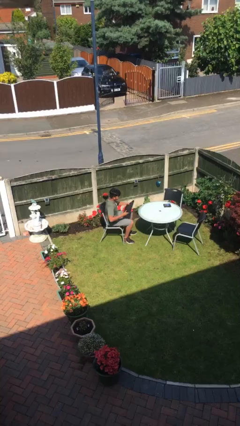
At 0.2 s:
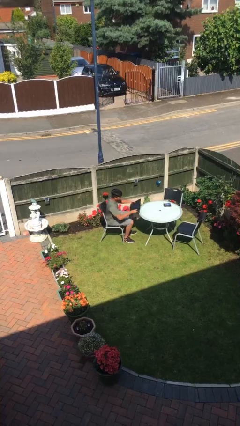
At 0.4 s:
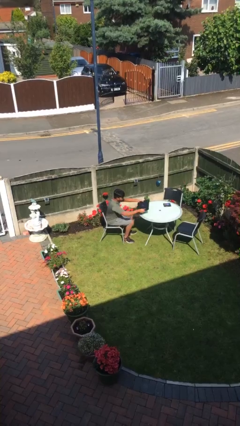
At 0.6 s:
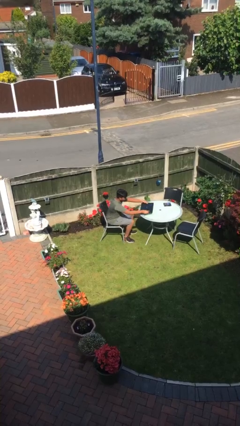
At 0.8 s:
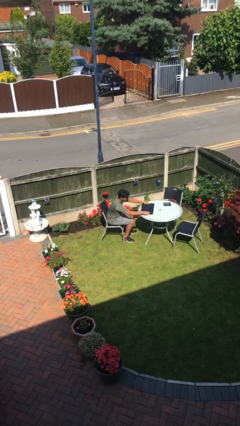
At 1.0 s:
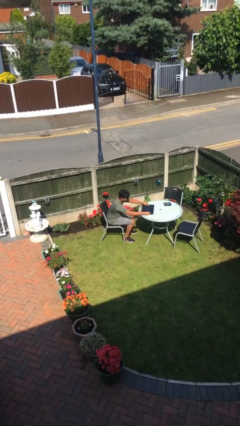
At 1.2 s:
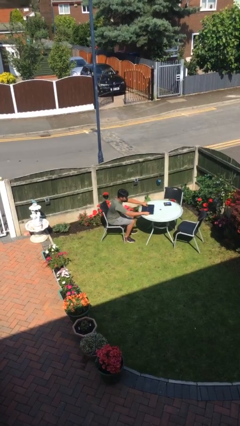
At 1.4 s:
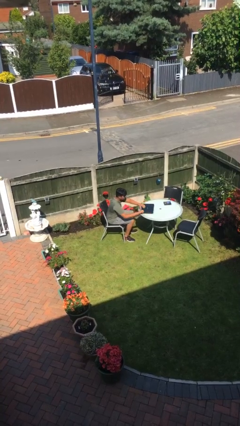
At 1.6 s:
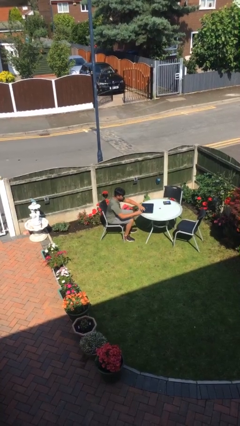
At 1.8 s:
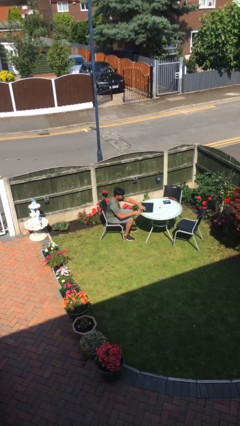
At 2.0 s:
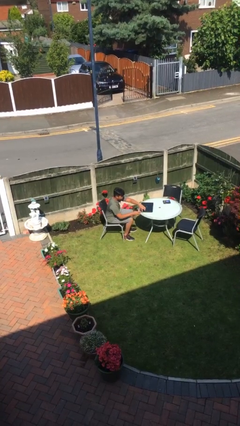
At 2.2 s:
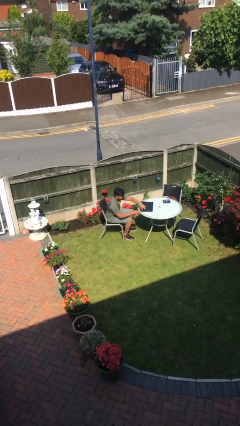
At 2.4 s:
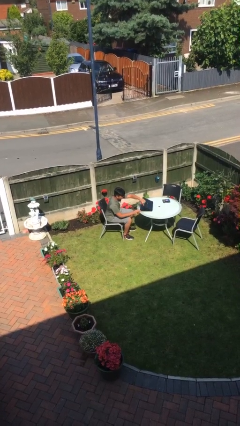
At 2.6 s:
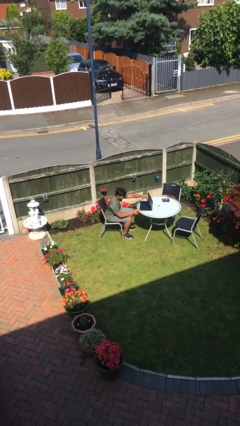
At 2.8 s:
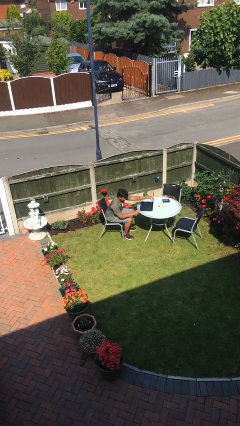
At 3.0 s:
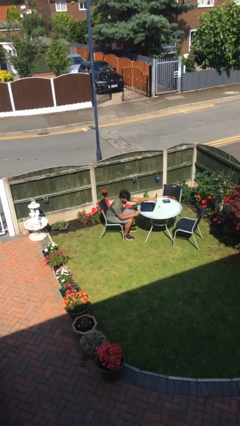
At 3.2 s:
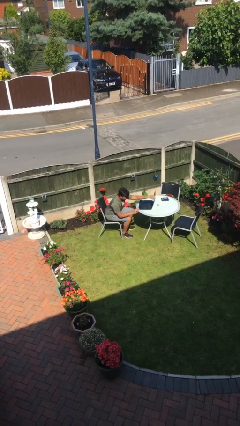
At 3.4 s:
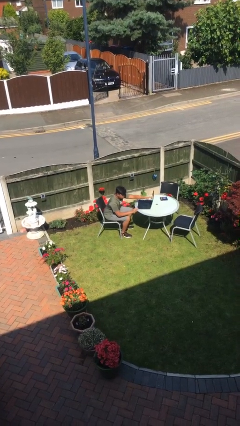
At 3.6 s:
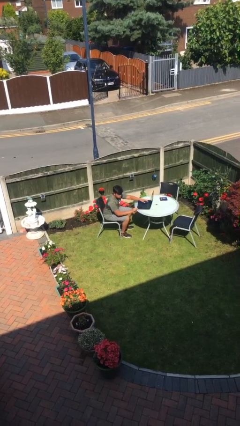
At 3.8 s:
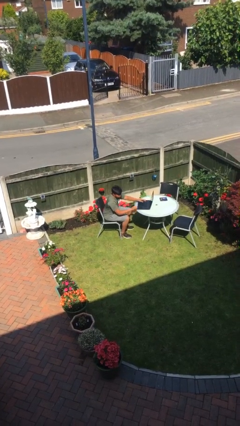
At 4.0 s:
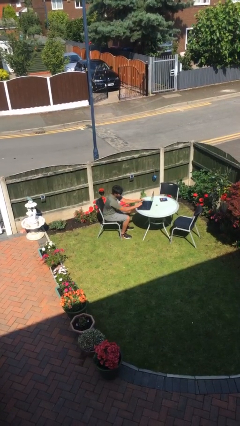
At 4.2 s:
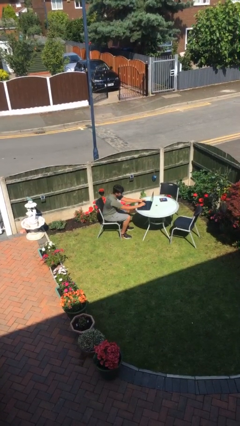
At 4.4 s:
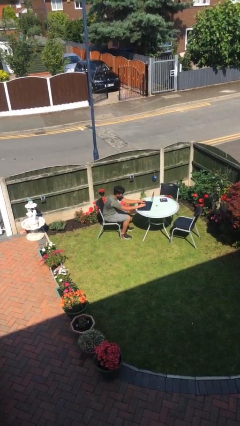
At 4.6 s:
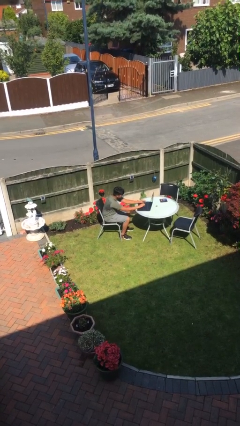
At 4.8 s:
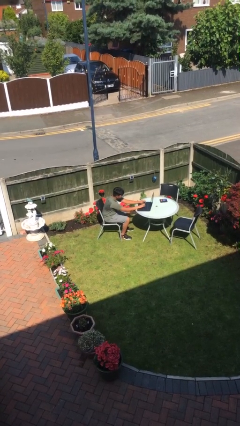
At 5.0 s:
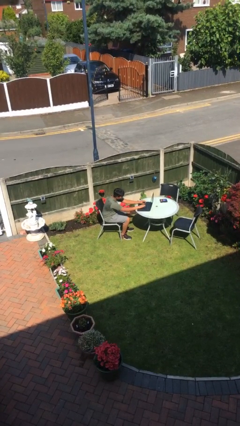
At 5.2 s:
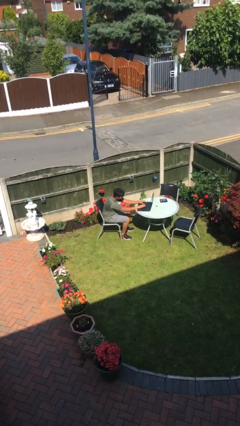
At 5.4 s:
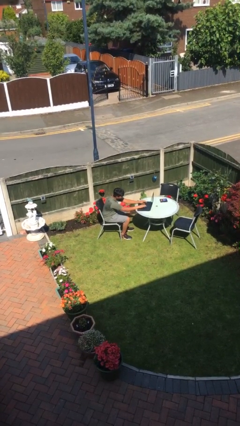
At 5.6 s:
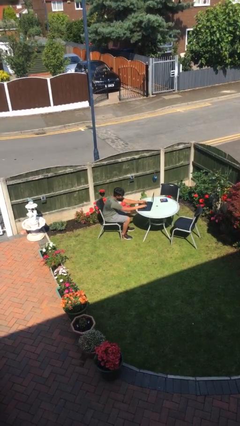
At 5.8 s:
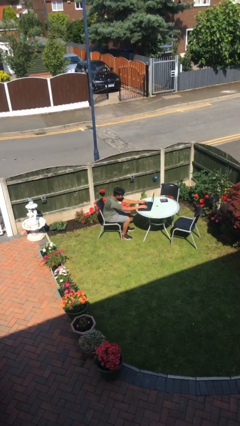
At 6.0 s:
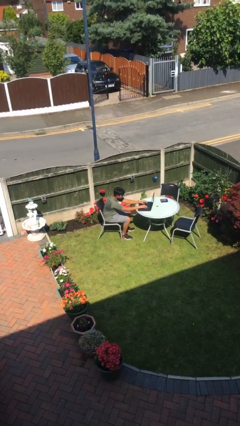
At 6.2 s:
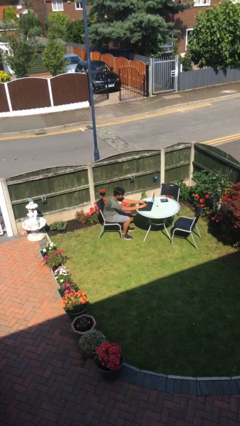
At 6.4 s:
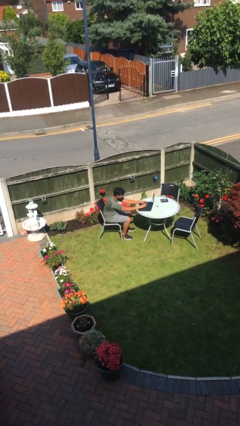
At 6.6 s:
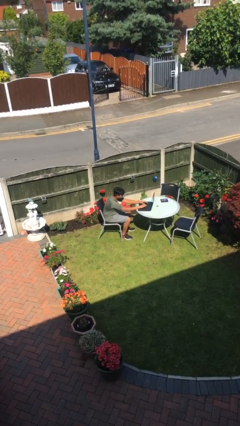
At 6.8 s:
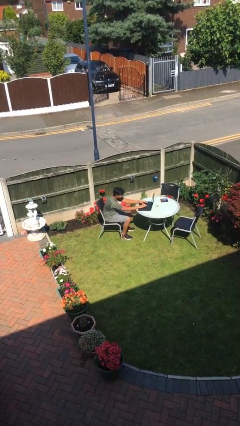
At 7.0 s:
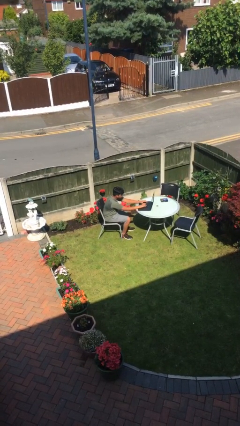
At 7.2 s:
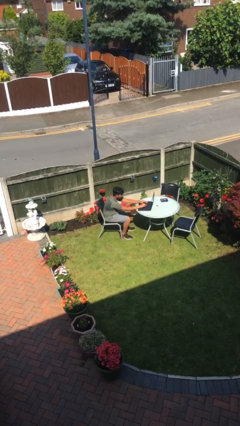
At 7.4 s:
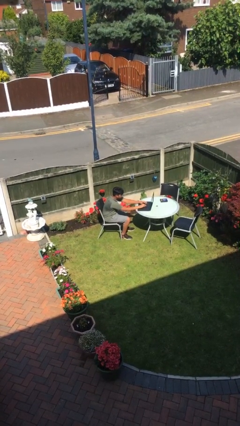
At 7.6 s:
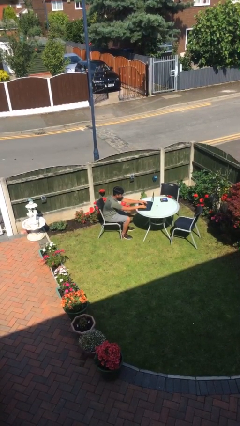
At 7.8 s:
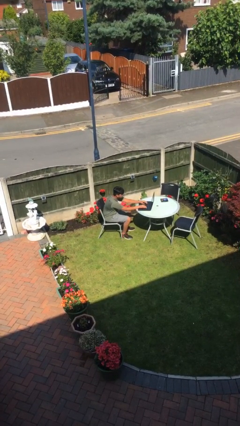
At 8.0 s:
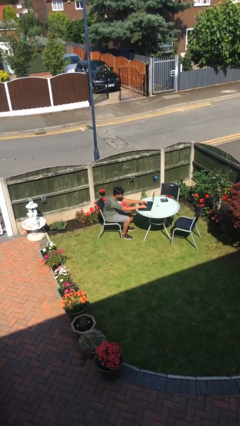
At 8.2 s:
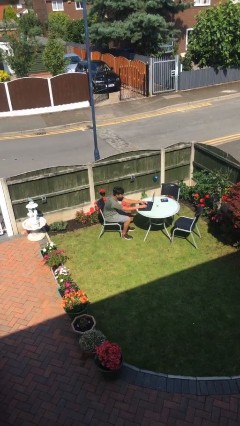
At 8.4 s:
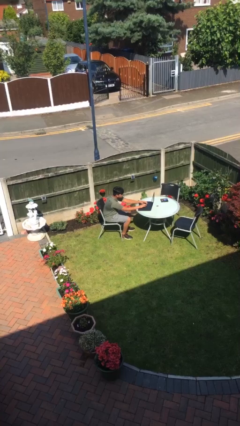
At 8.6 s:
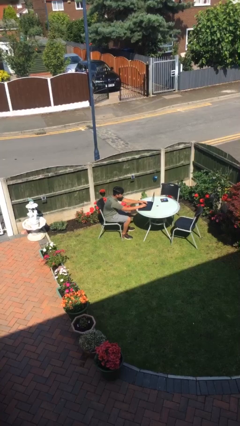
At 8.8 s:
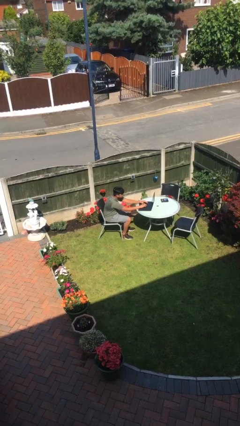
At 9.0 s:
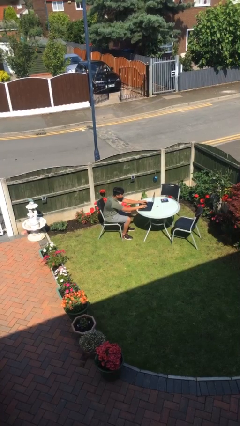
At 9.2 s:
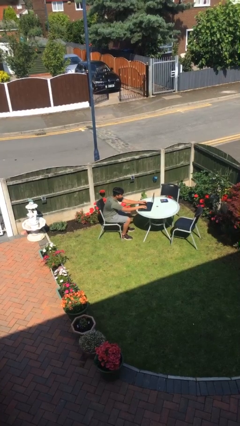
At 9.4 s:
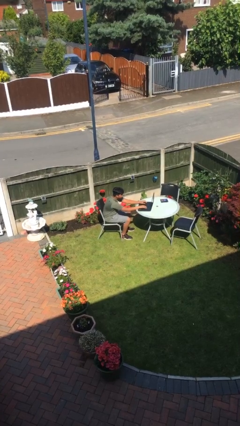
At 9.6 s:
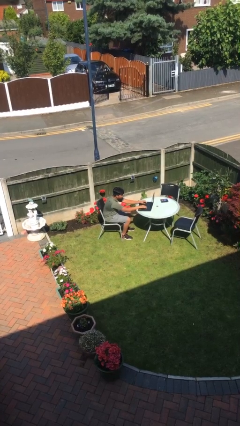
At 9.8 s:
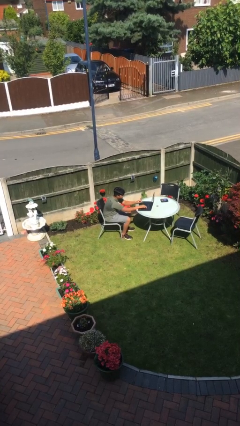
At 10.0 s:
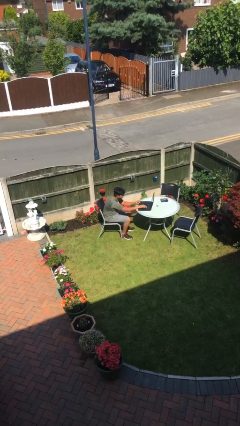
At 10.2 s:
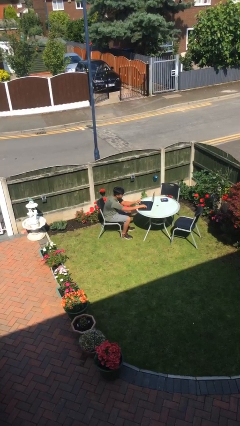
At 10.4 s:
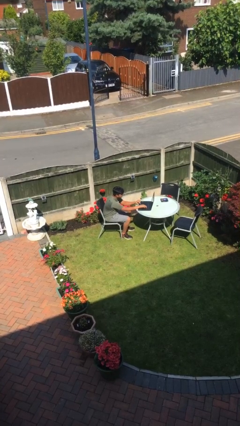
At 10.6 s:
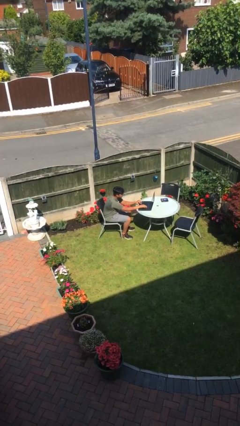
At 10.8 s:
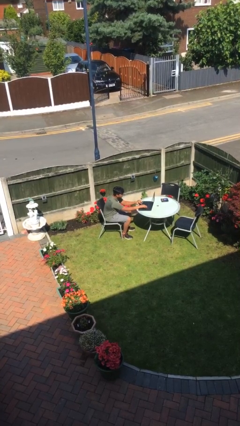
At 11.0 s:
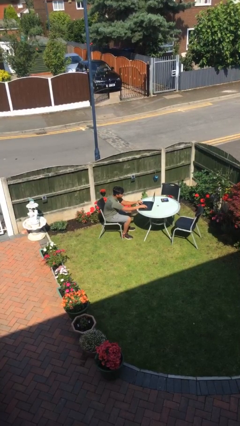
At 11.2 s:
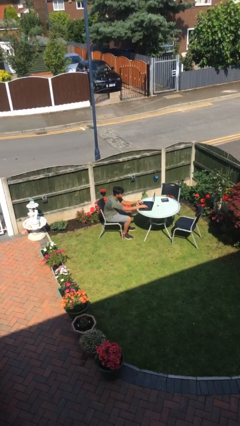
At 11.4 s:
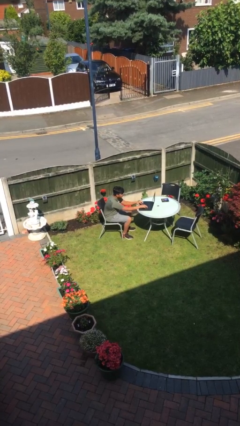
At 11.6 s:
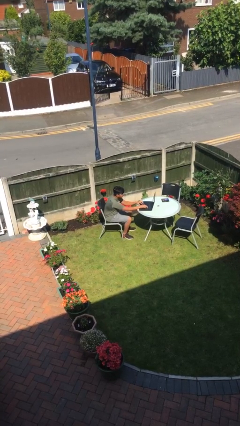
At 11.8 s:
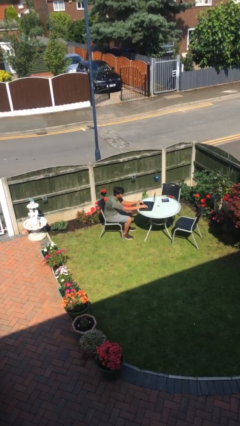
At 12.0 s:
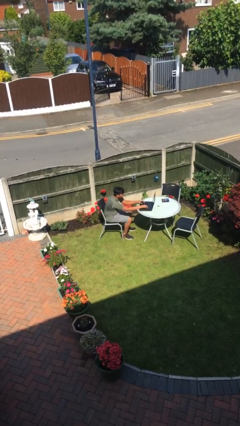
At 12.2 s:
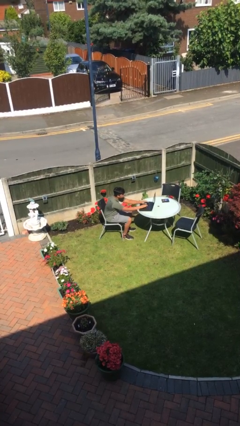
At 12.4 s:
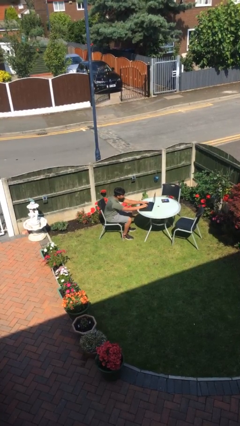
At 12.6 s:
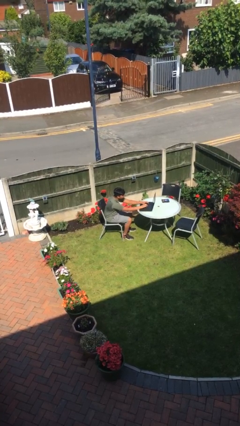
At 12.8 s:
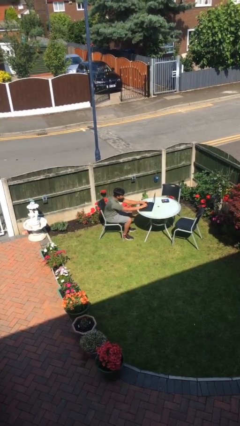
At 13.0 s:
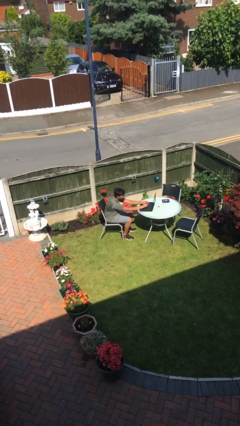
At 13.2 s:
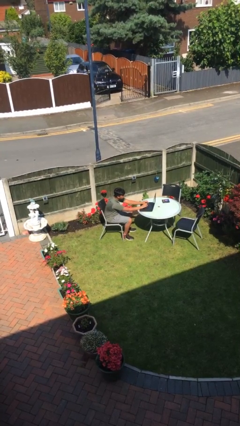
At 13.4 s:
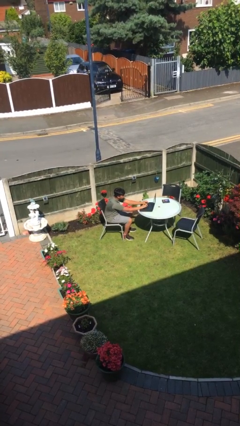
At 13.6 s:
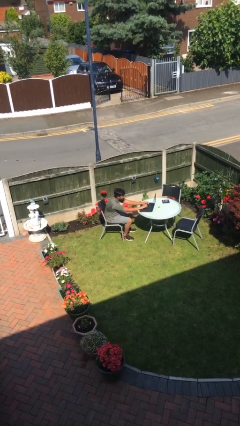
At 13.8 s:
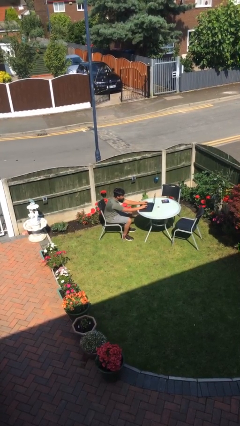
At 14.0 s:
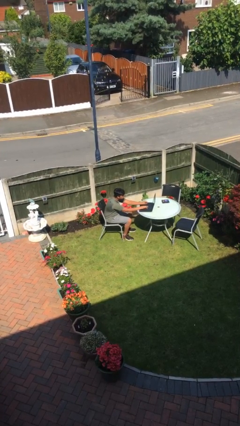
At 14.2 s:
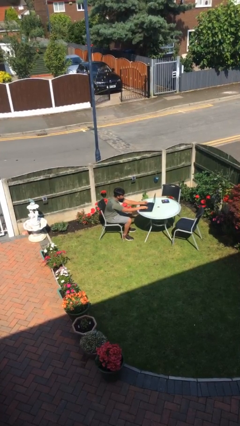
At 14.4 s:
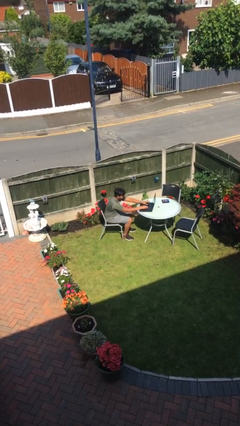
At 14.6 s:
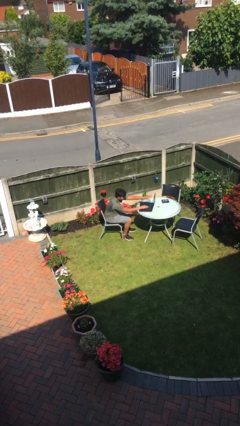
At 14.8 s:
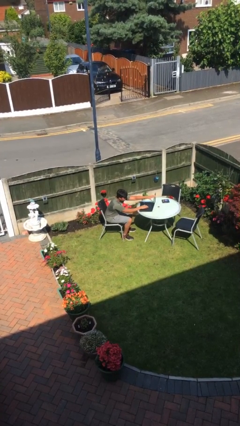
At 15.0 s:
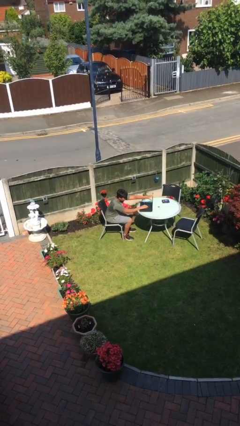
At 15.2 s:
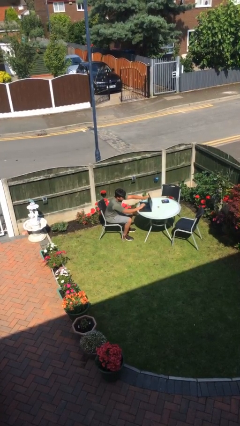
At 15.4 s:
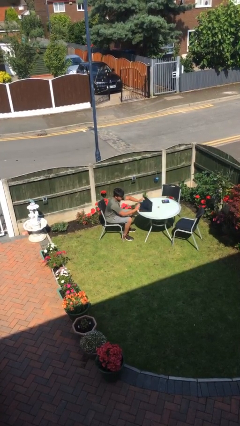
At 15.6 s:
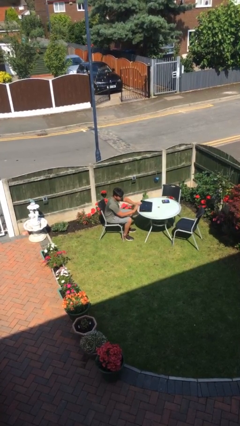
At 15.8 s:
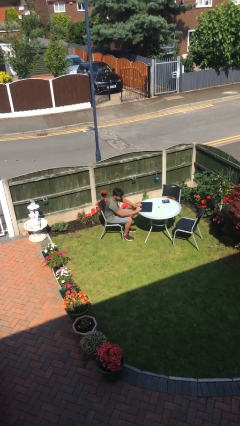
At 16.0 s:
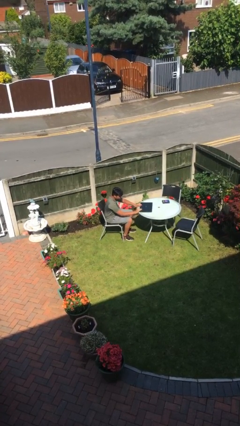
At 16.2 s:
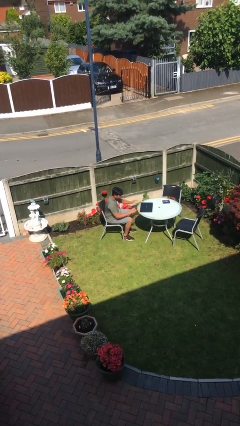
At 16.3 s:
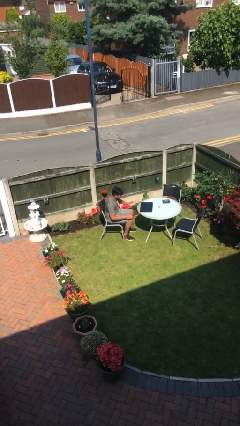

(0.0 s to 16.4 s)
person interacts with laptop

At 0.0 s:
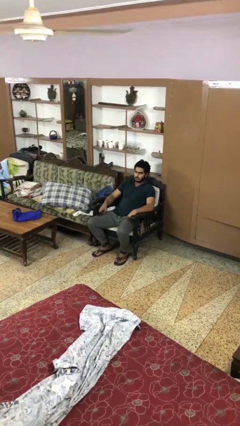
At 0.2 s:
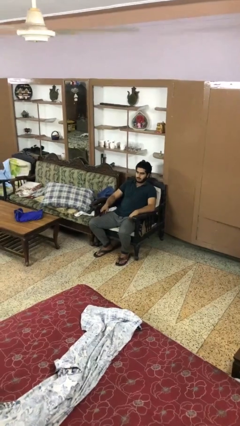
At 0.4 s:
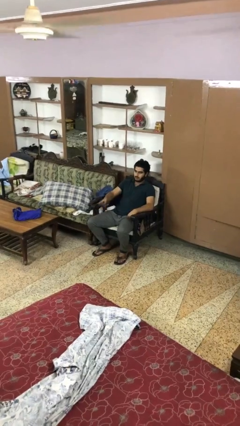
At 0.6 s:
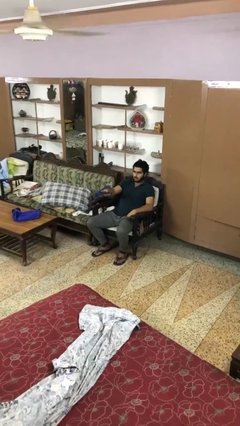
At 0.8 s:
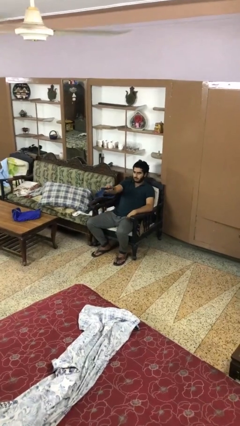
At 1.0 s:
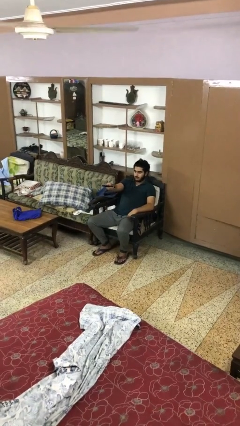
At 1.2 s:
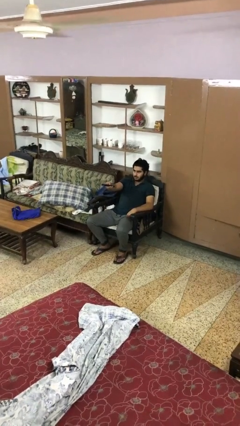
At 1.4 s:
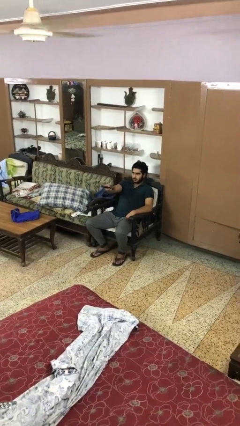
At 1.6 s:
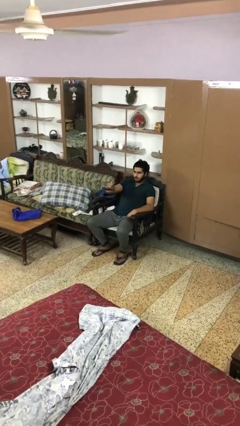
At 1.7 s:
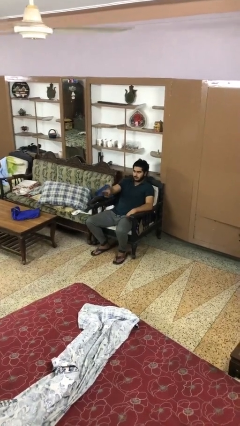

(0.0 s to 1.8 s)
person uses television remote

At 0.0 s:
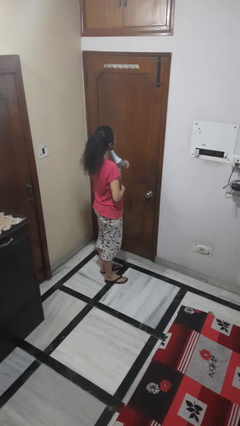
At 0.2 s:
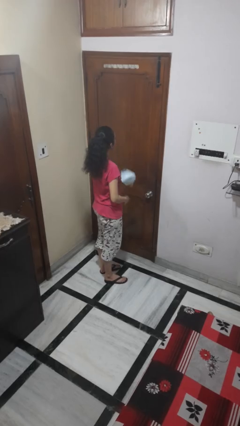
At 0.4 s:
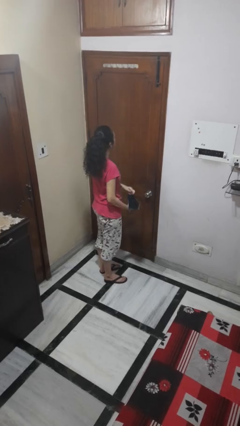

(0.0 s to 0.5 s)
person takes off facemask
